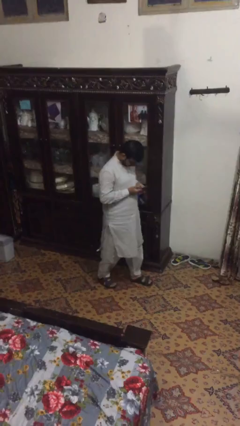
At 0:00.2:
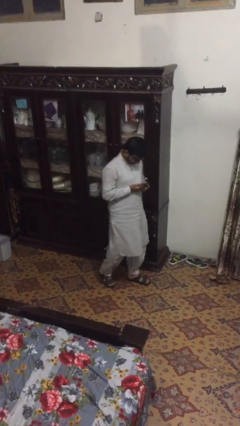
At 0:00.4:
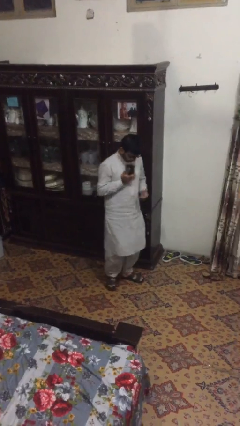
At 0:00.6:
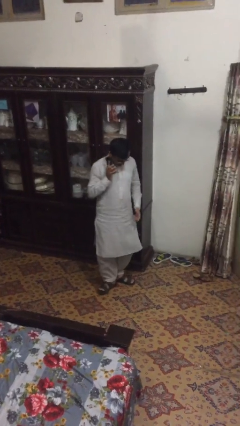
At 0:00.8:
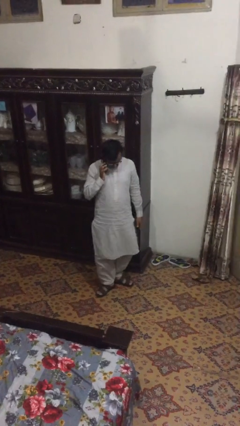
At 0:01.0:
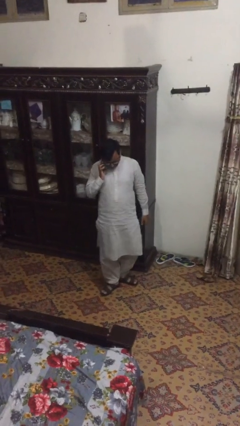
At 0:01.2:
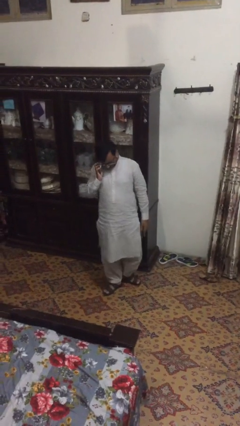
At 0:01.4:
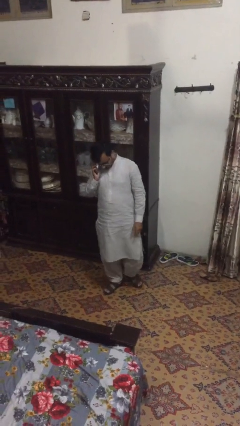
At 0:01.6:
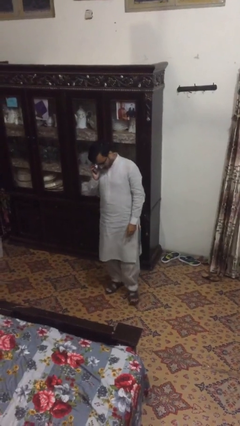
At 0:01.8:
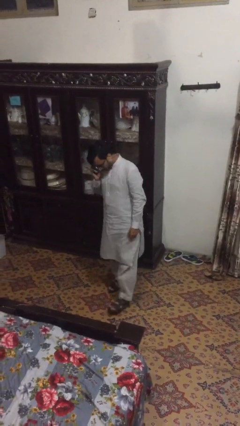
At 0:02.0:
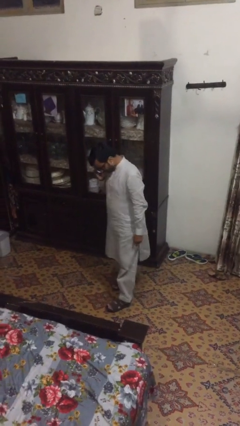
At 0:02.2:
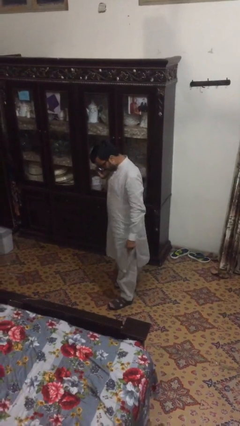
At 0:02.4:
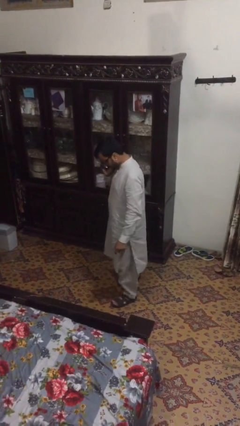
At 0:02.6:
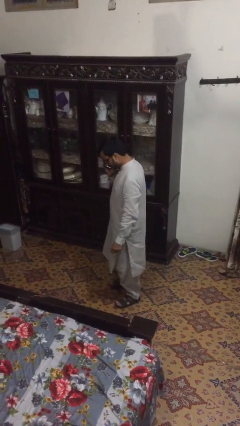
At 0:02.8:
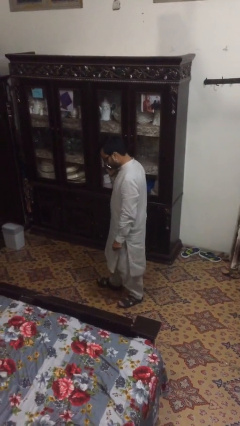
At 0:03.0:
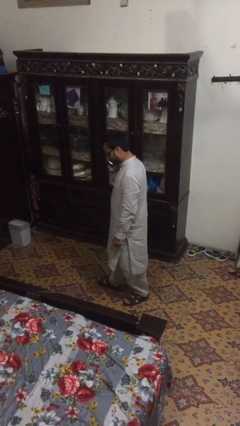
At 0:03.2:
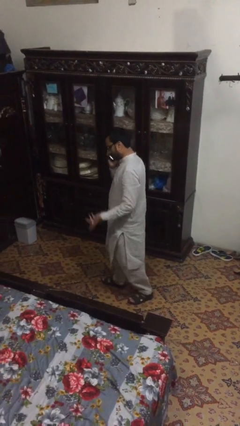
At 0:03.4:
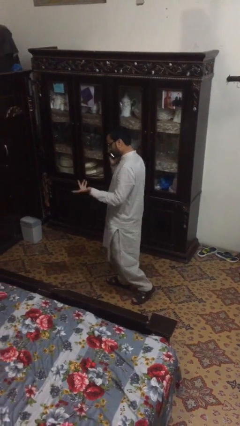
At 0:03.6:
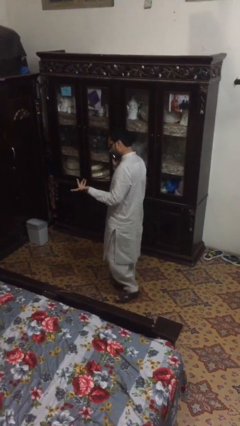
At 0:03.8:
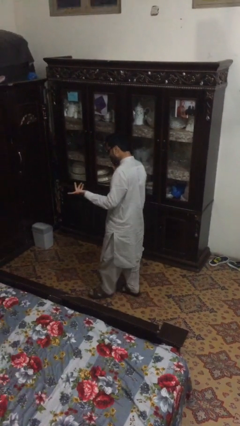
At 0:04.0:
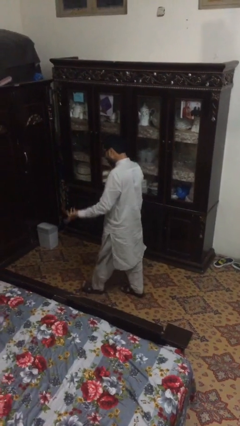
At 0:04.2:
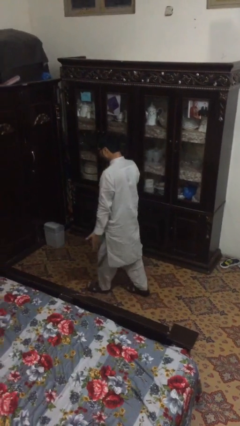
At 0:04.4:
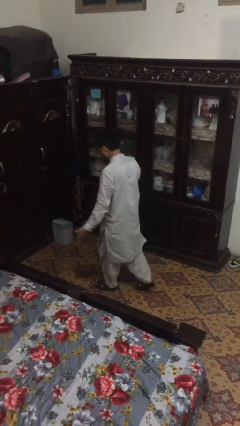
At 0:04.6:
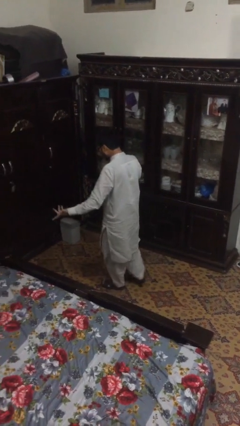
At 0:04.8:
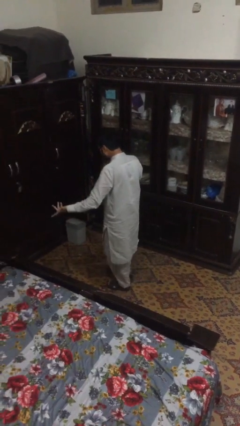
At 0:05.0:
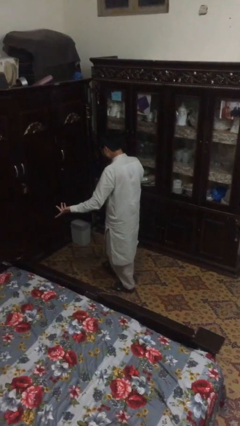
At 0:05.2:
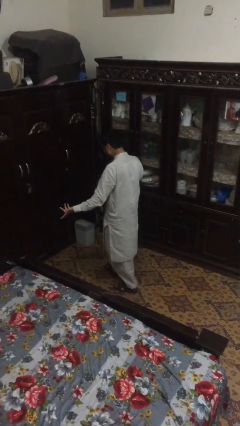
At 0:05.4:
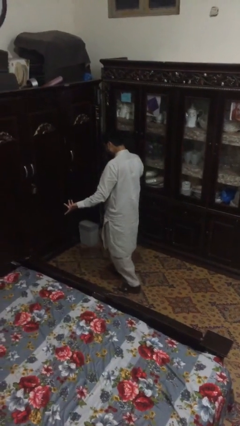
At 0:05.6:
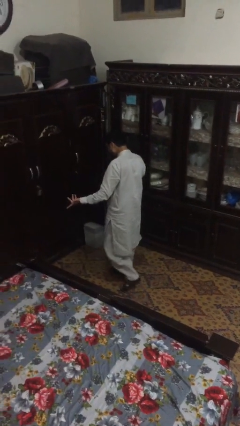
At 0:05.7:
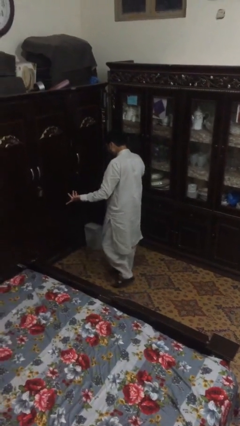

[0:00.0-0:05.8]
person talks on phone

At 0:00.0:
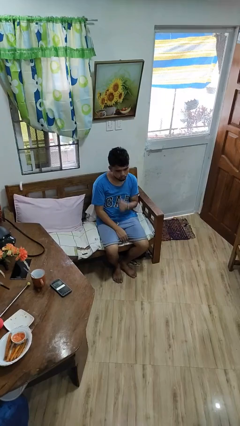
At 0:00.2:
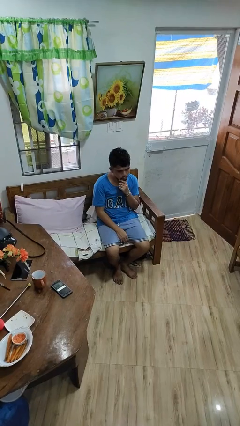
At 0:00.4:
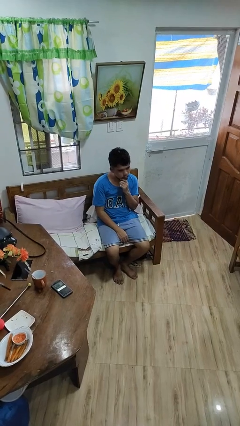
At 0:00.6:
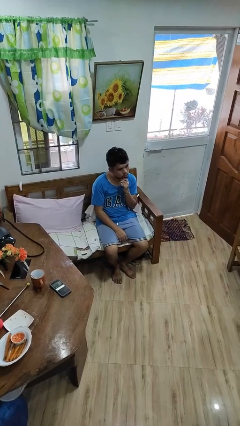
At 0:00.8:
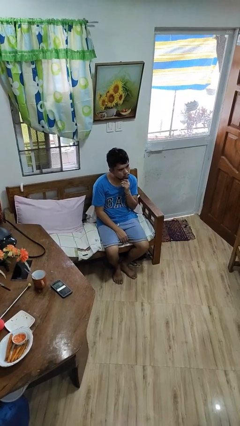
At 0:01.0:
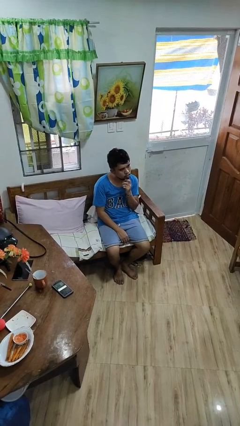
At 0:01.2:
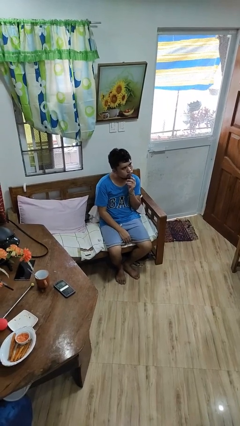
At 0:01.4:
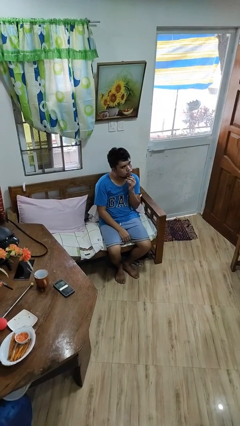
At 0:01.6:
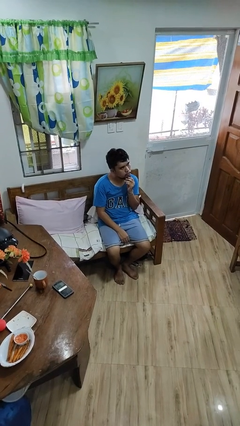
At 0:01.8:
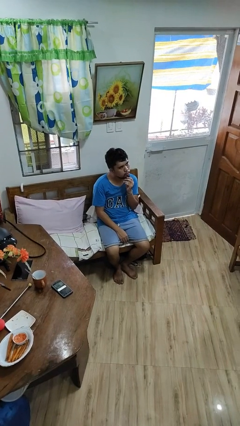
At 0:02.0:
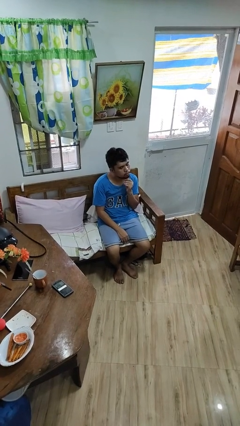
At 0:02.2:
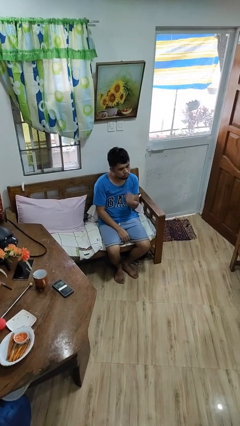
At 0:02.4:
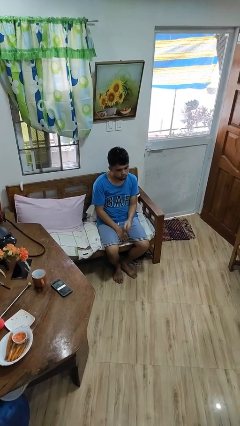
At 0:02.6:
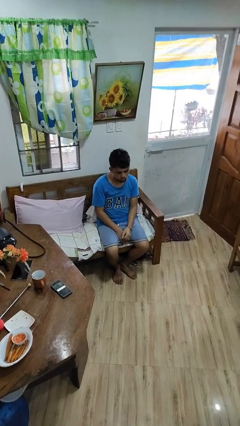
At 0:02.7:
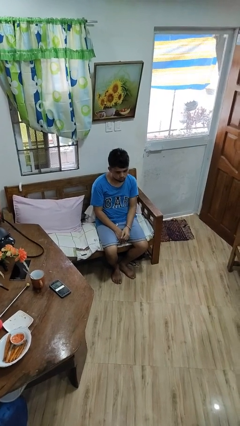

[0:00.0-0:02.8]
person strokes chin

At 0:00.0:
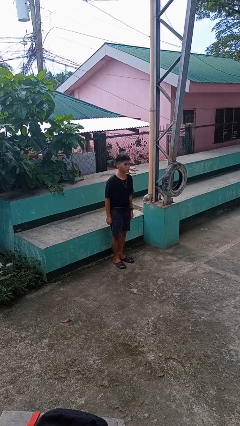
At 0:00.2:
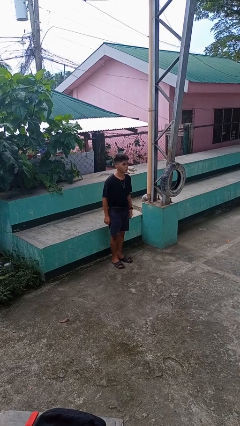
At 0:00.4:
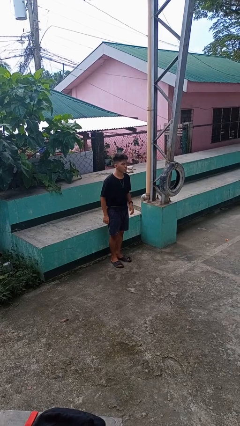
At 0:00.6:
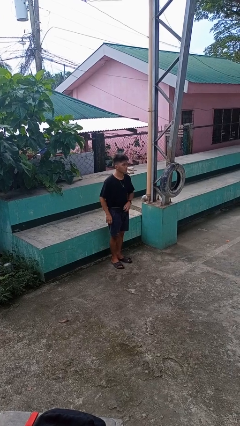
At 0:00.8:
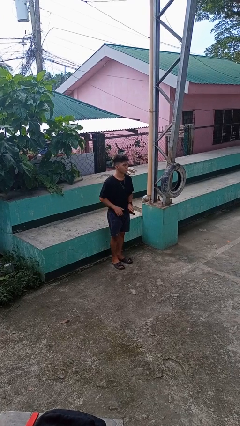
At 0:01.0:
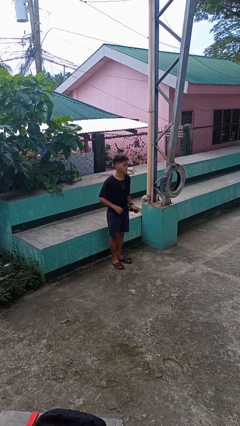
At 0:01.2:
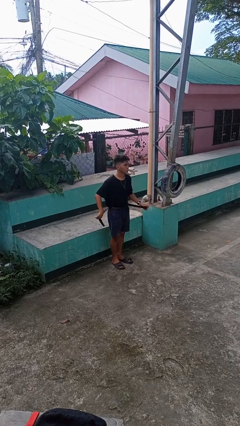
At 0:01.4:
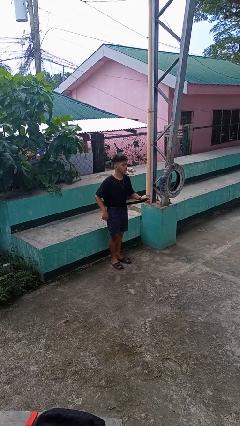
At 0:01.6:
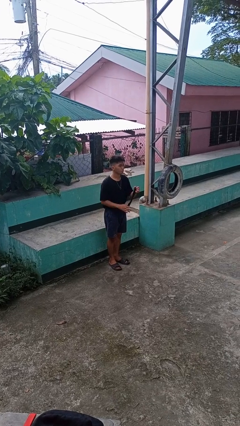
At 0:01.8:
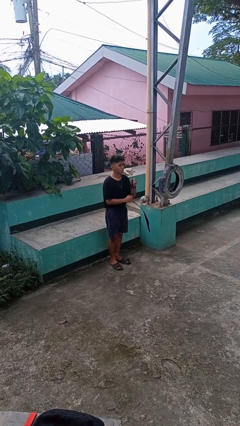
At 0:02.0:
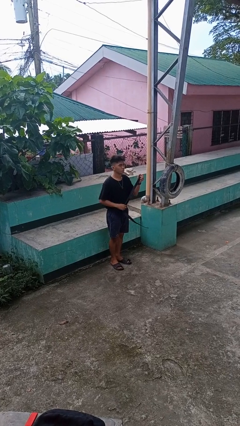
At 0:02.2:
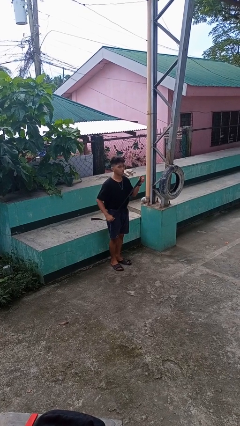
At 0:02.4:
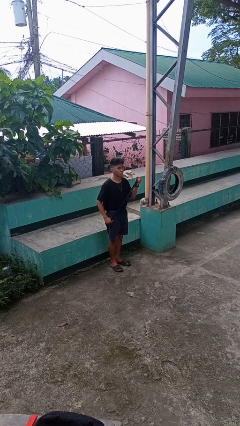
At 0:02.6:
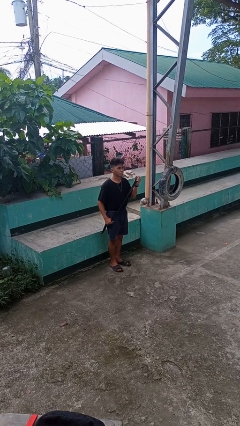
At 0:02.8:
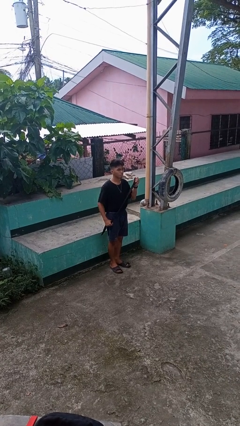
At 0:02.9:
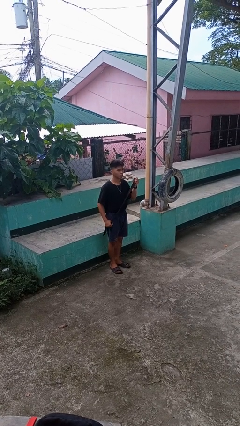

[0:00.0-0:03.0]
person takes off belt

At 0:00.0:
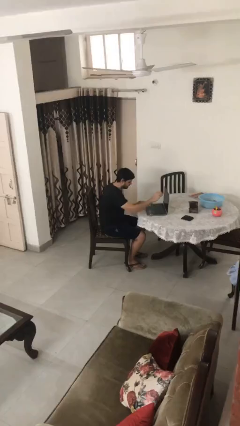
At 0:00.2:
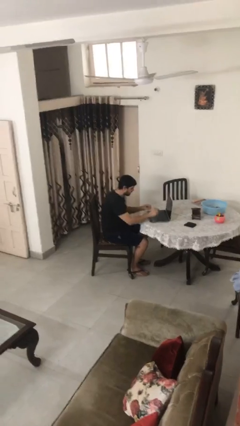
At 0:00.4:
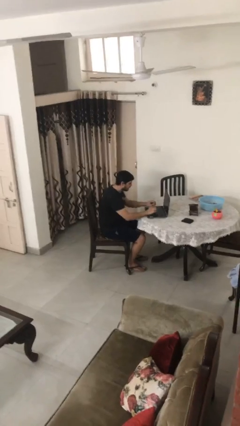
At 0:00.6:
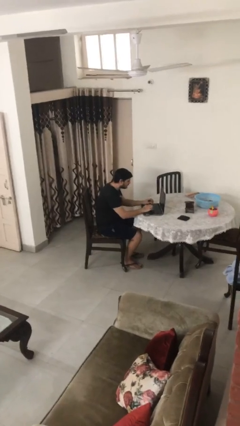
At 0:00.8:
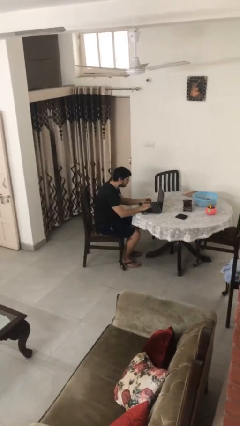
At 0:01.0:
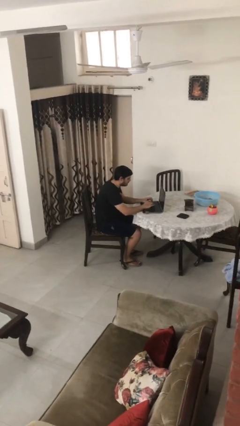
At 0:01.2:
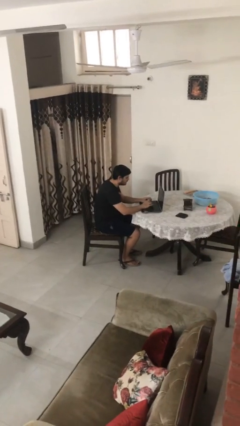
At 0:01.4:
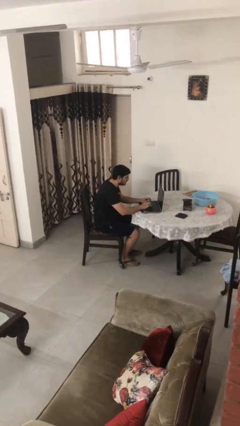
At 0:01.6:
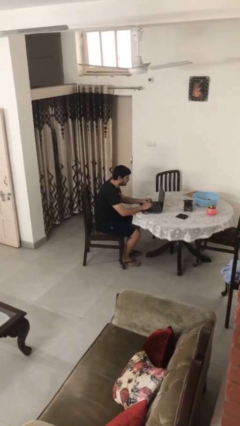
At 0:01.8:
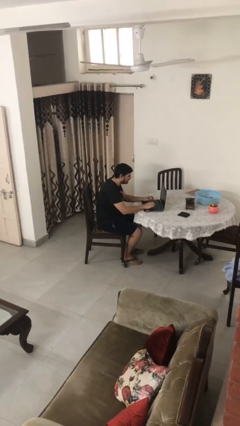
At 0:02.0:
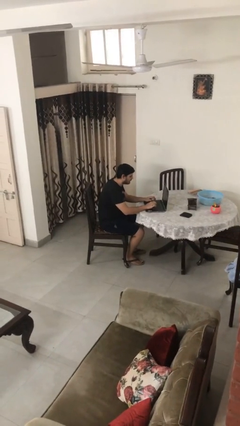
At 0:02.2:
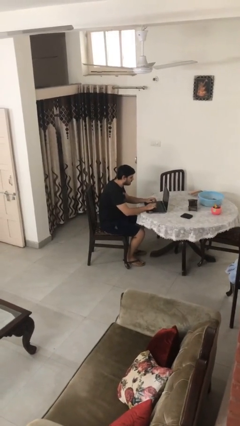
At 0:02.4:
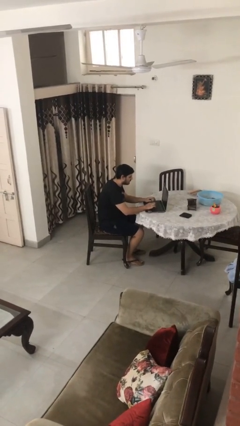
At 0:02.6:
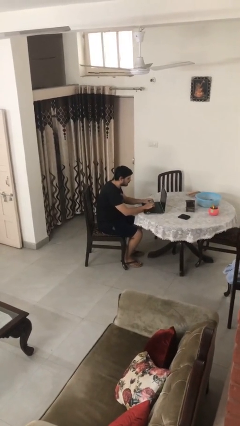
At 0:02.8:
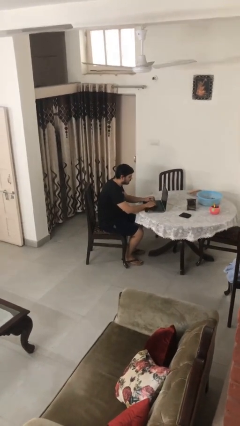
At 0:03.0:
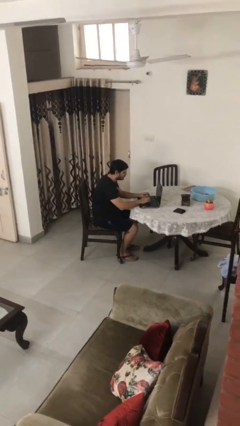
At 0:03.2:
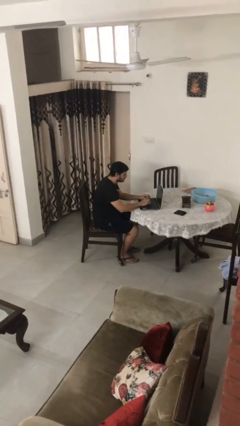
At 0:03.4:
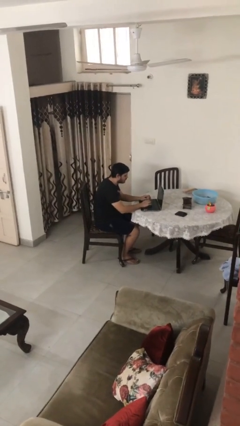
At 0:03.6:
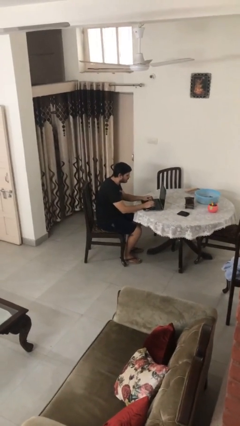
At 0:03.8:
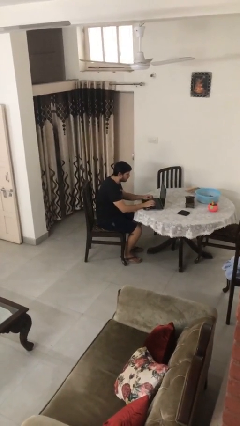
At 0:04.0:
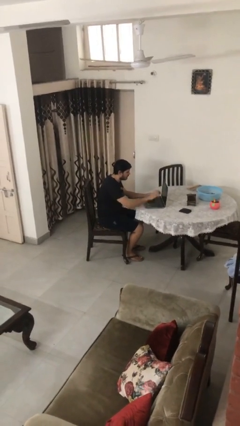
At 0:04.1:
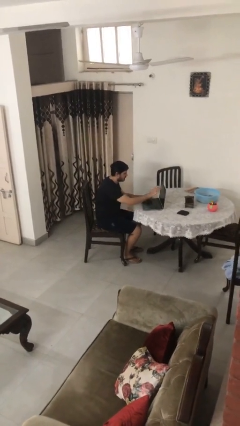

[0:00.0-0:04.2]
person interacts with laptop

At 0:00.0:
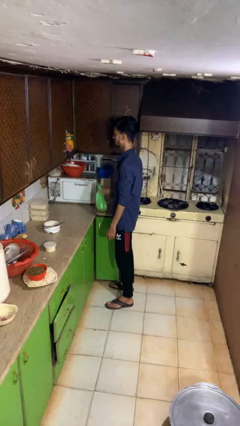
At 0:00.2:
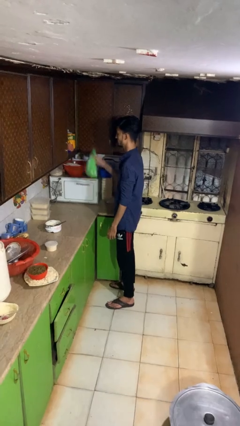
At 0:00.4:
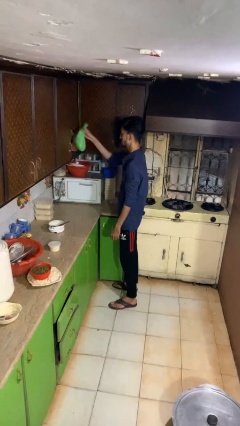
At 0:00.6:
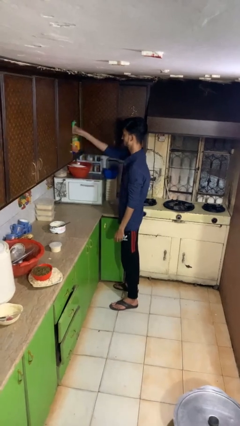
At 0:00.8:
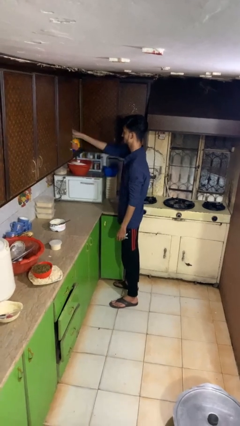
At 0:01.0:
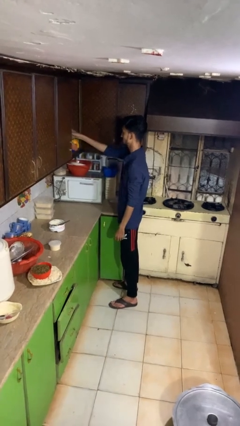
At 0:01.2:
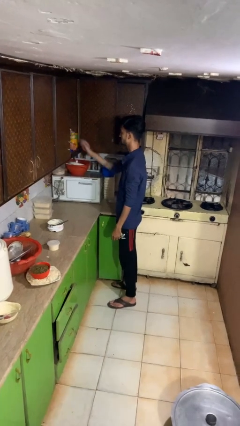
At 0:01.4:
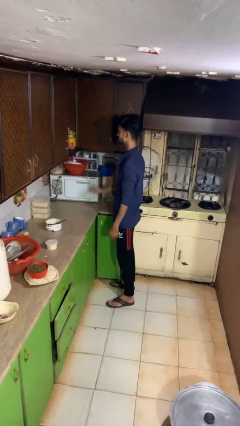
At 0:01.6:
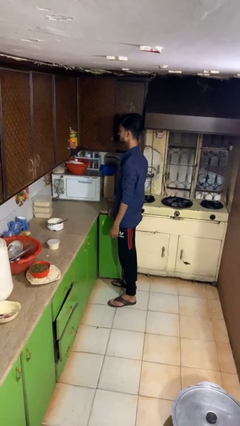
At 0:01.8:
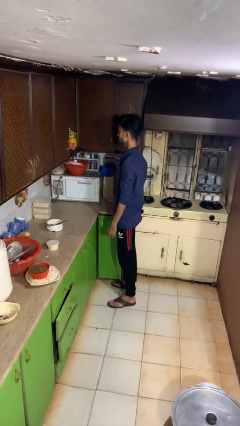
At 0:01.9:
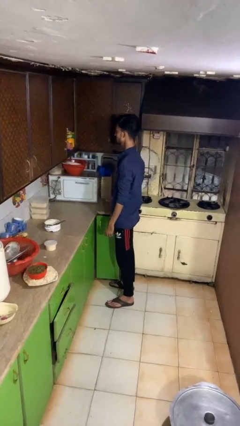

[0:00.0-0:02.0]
person loads groceries into cabinet
